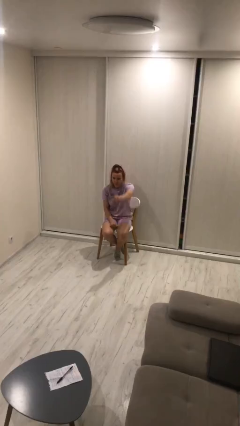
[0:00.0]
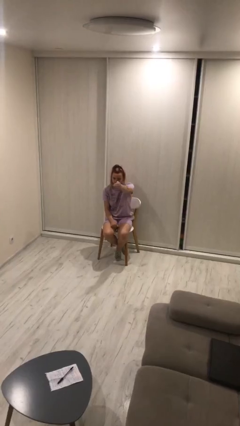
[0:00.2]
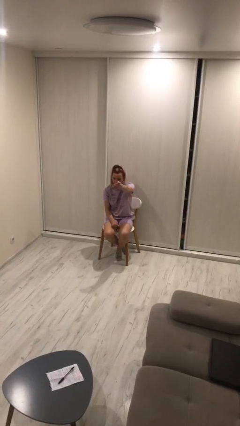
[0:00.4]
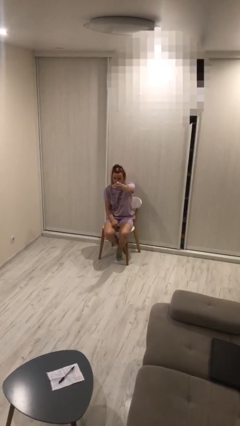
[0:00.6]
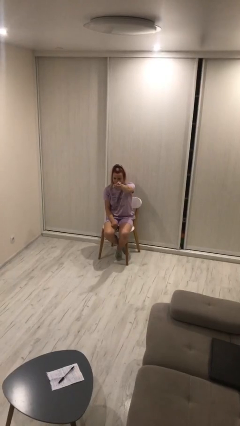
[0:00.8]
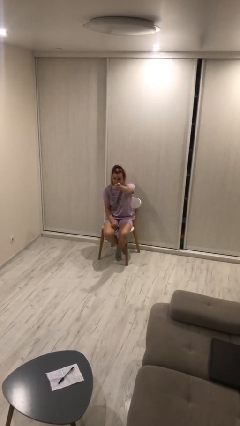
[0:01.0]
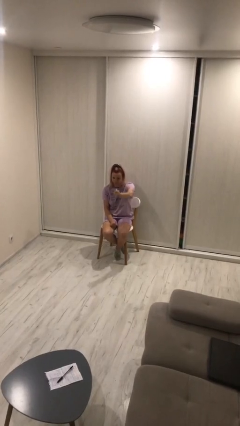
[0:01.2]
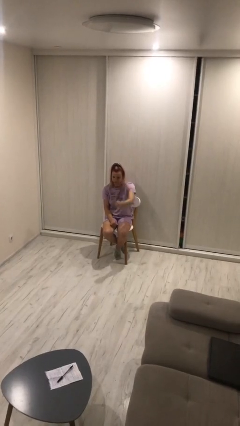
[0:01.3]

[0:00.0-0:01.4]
person gestures come here

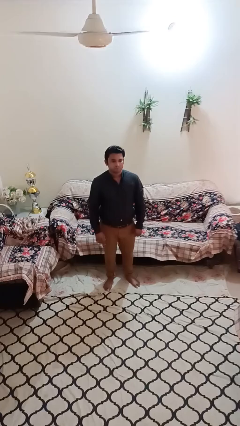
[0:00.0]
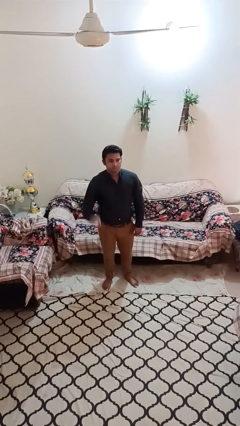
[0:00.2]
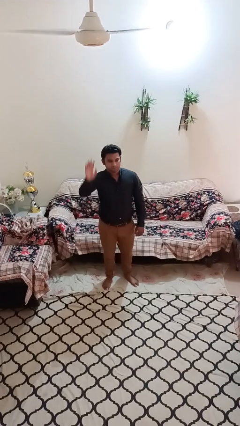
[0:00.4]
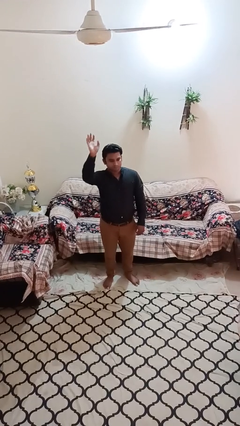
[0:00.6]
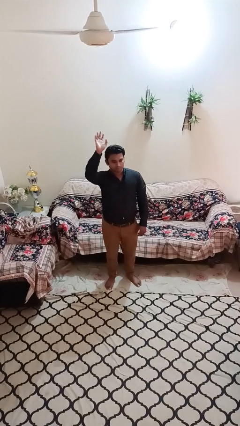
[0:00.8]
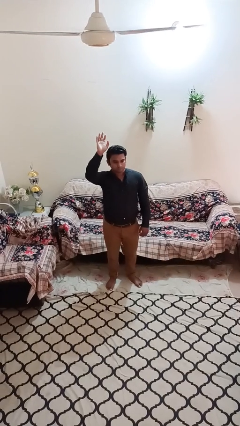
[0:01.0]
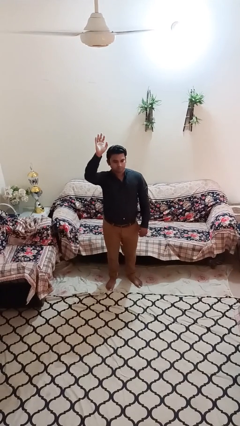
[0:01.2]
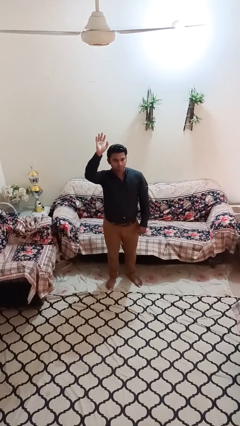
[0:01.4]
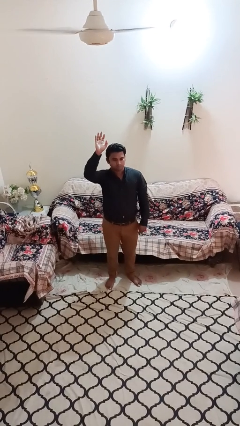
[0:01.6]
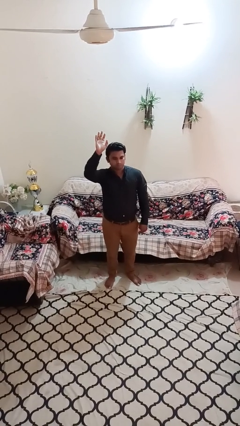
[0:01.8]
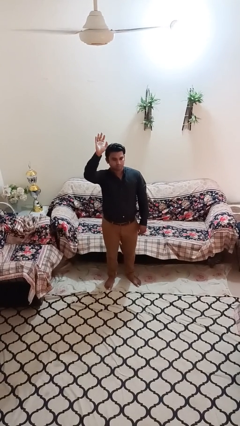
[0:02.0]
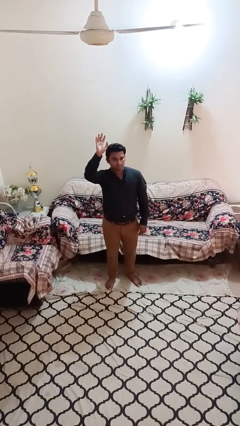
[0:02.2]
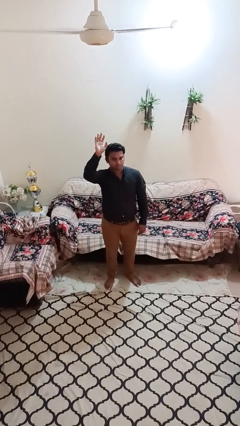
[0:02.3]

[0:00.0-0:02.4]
person gestures raise hand

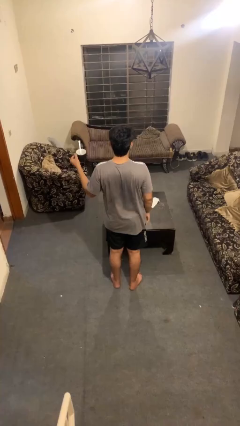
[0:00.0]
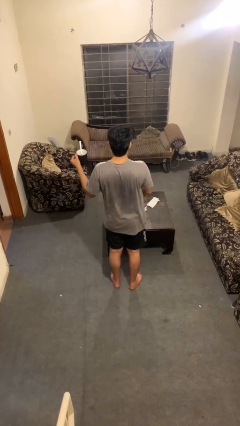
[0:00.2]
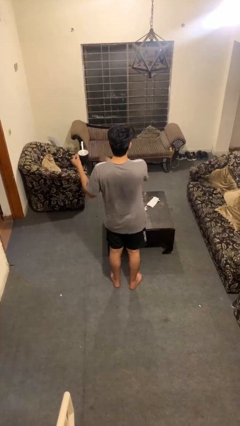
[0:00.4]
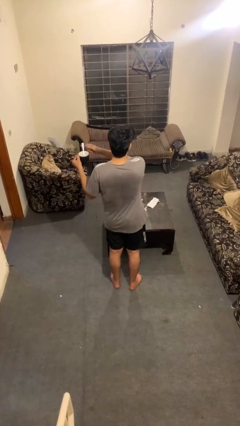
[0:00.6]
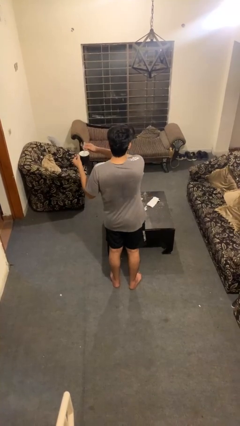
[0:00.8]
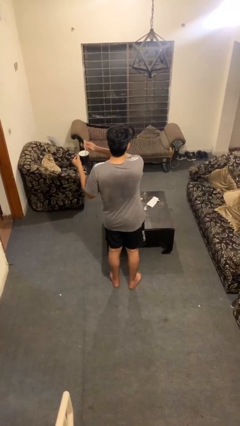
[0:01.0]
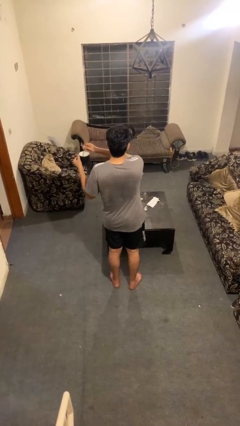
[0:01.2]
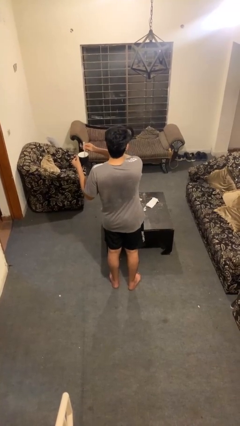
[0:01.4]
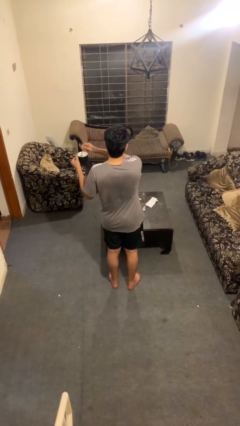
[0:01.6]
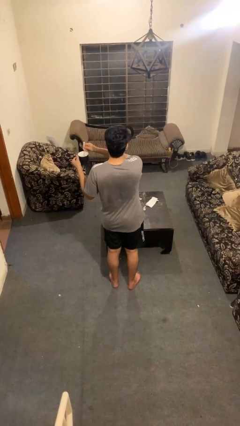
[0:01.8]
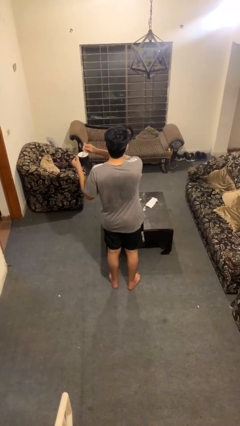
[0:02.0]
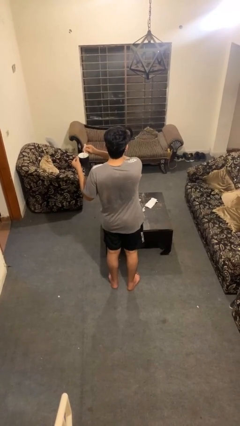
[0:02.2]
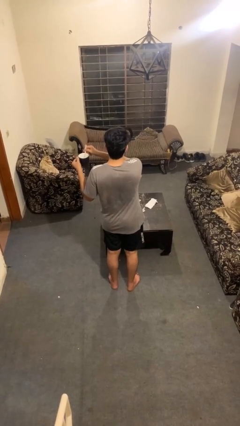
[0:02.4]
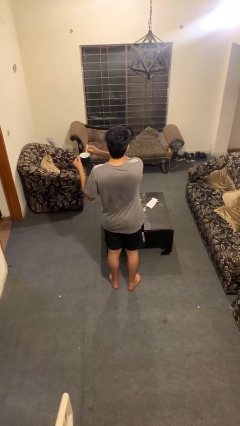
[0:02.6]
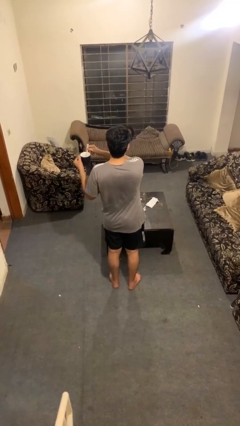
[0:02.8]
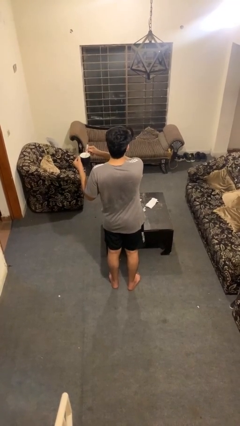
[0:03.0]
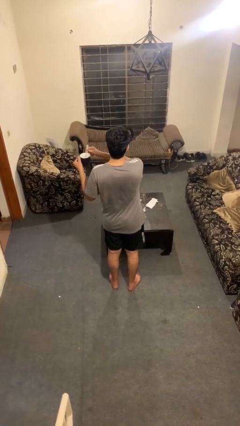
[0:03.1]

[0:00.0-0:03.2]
person stirs mug

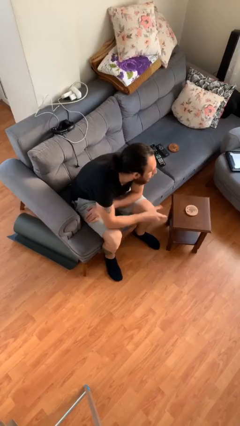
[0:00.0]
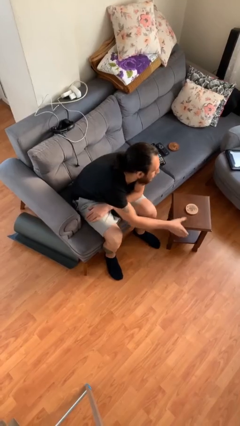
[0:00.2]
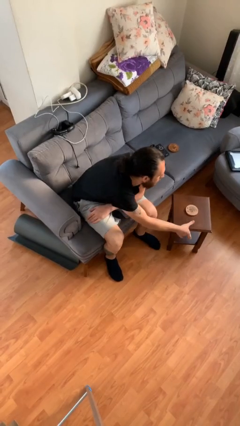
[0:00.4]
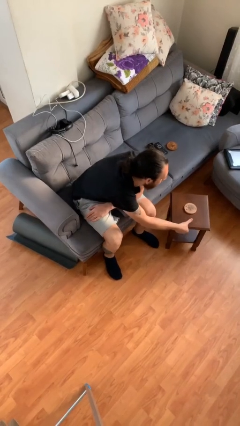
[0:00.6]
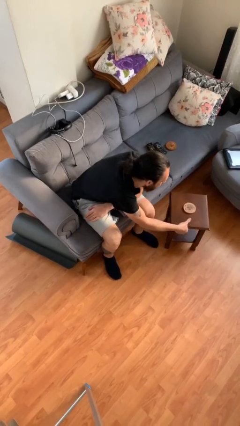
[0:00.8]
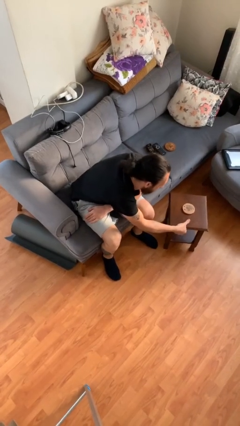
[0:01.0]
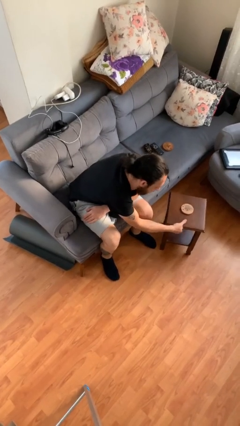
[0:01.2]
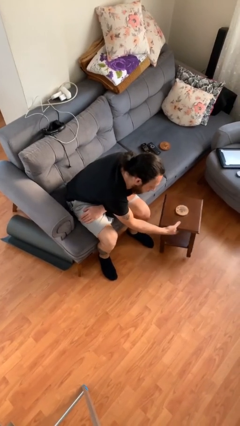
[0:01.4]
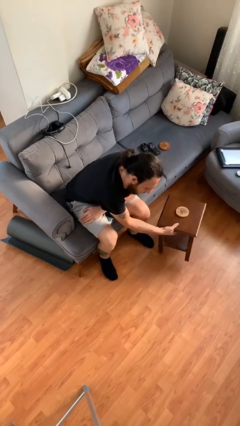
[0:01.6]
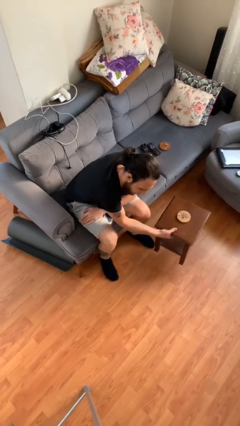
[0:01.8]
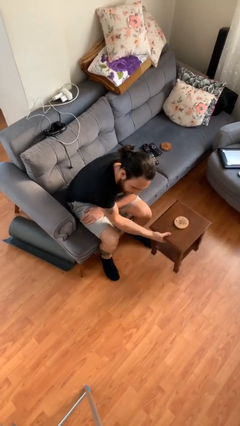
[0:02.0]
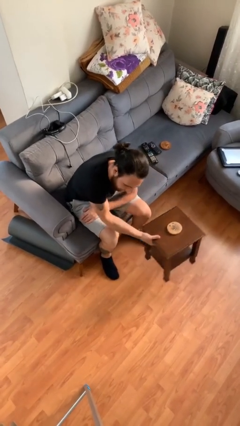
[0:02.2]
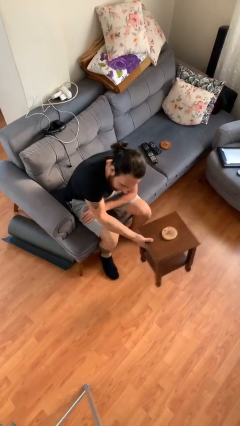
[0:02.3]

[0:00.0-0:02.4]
person picks up object from floor

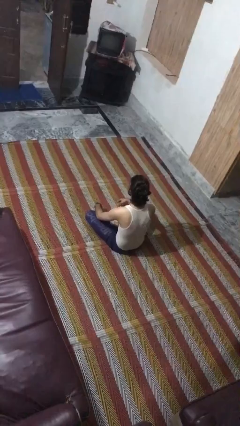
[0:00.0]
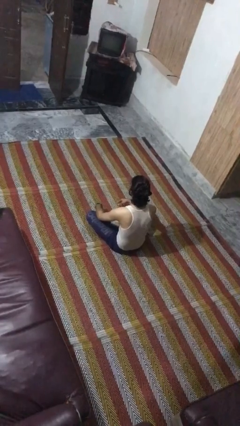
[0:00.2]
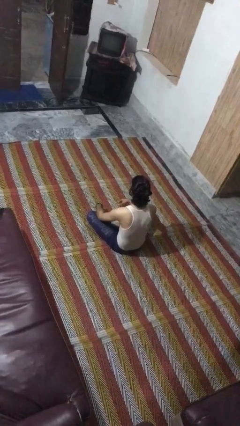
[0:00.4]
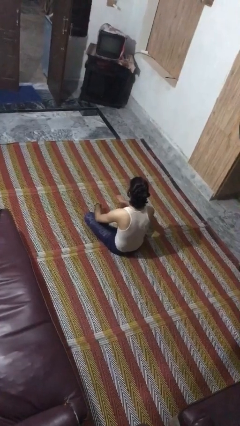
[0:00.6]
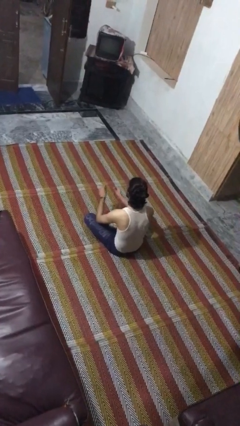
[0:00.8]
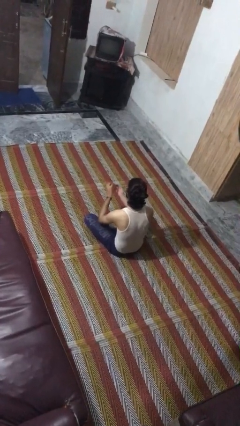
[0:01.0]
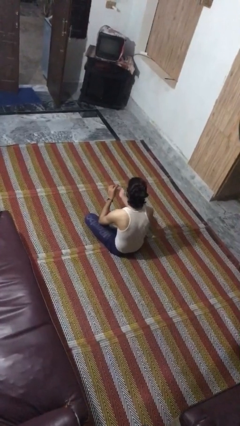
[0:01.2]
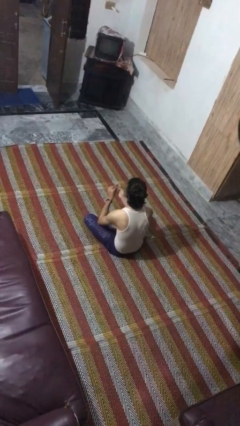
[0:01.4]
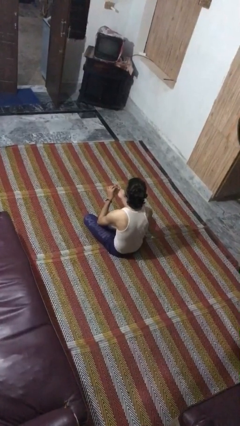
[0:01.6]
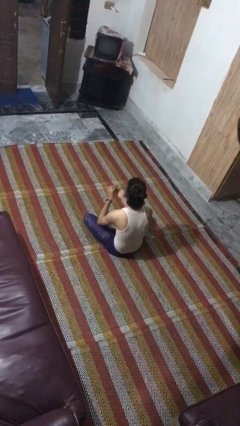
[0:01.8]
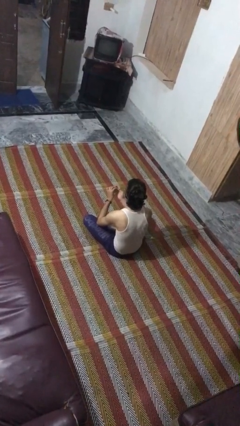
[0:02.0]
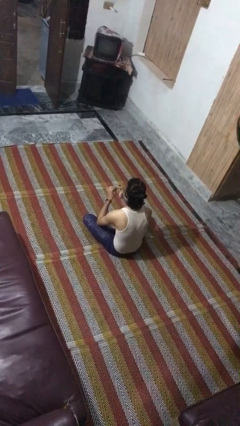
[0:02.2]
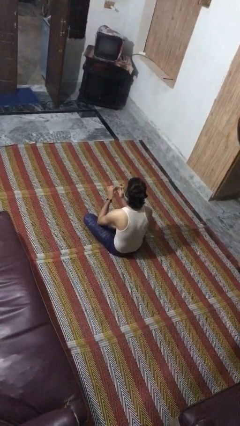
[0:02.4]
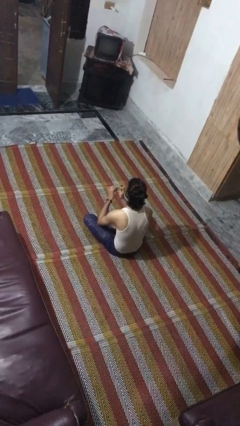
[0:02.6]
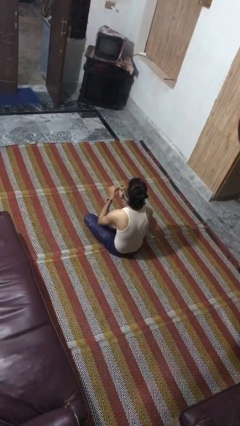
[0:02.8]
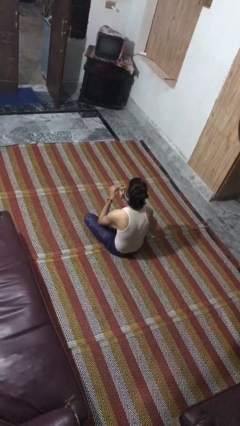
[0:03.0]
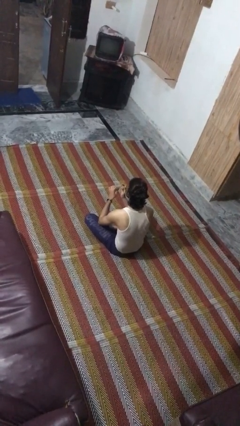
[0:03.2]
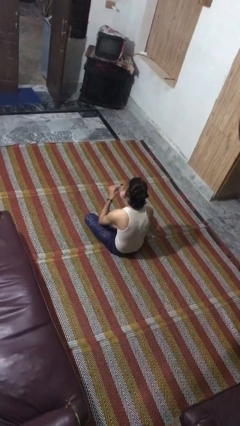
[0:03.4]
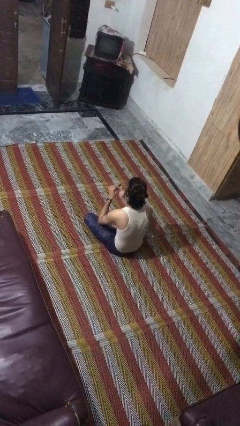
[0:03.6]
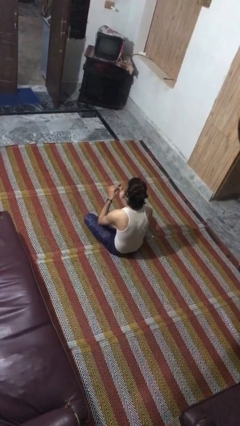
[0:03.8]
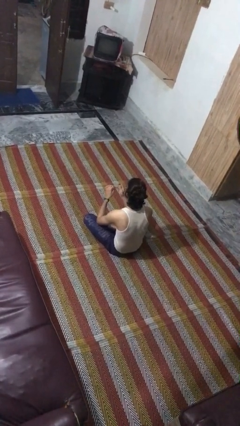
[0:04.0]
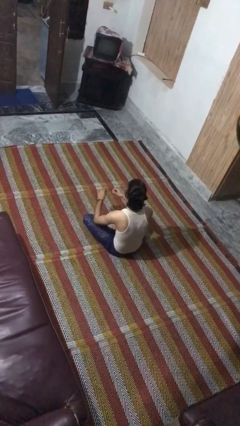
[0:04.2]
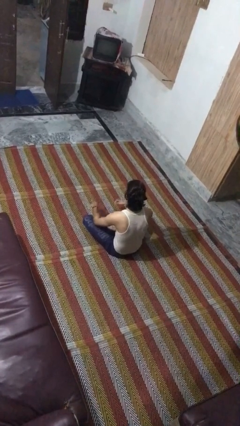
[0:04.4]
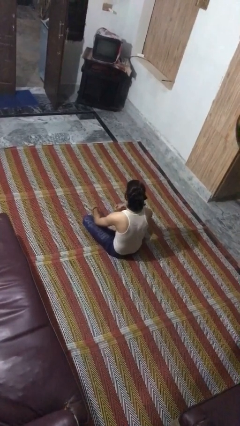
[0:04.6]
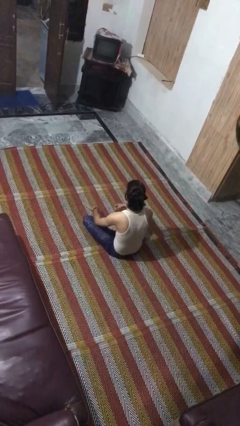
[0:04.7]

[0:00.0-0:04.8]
person files fingernails

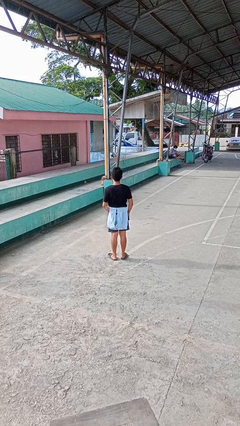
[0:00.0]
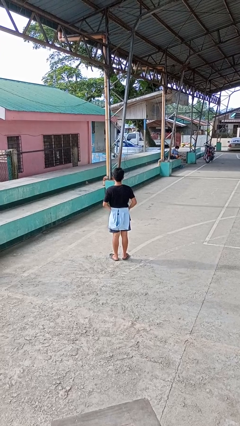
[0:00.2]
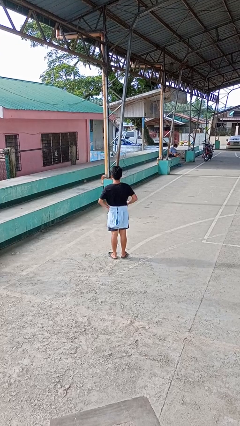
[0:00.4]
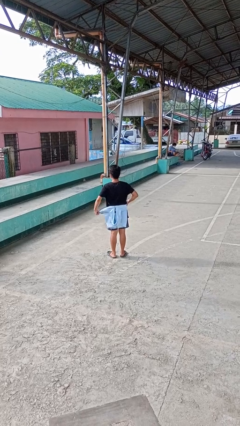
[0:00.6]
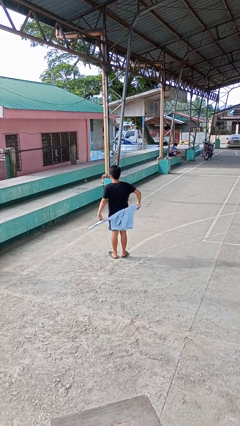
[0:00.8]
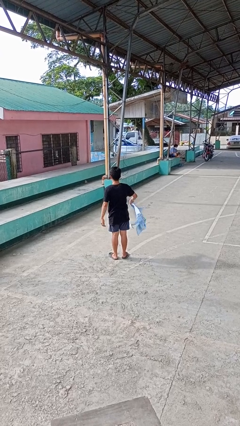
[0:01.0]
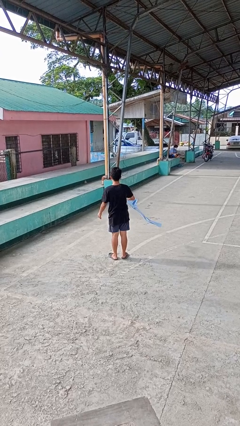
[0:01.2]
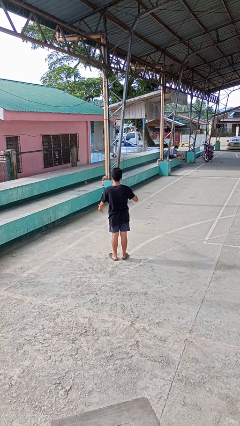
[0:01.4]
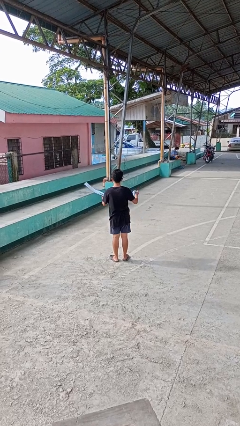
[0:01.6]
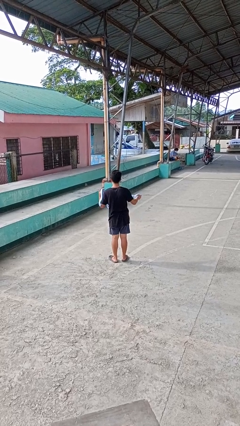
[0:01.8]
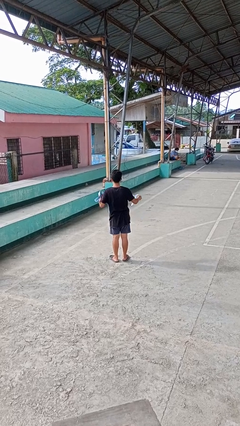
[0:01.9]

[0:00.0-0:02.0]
person unties jacket around waist

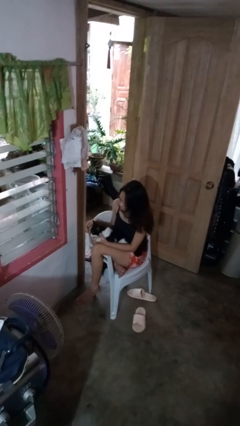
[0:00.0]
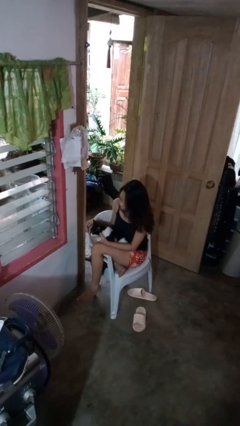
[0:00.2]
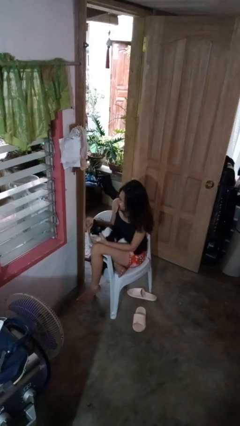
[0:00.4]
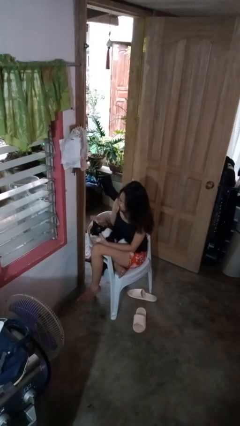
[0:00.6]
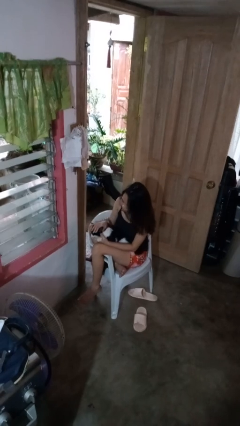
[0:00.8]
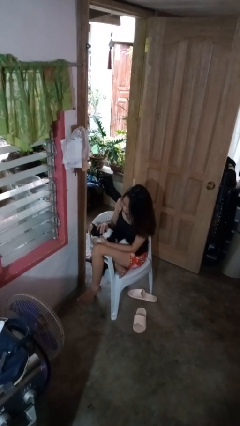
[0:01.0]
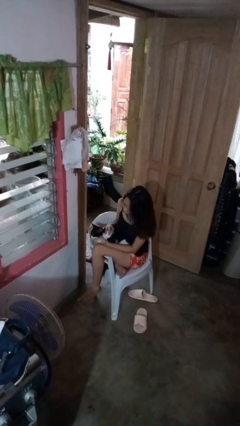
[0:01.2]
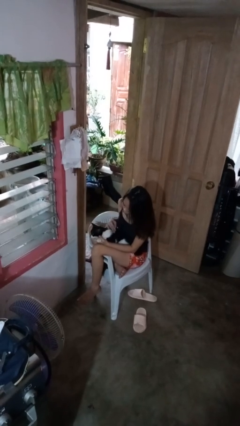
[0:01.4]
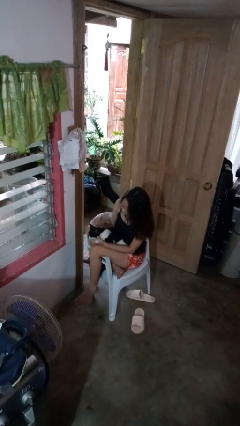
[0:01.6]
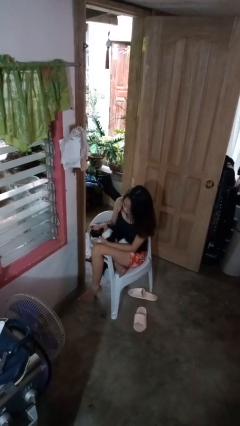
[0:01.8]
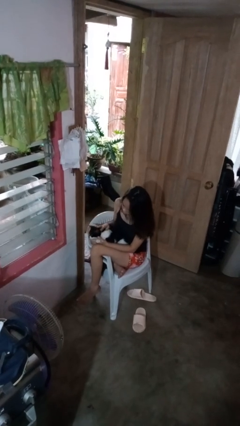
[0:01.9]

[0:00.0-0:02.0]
person pets cat
